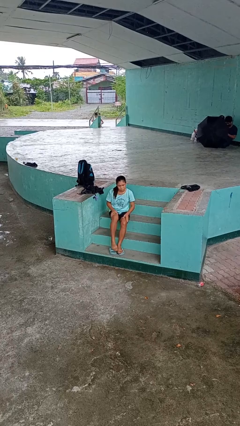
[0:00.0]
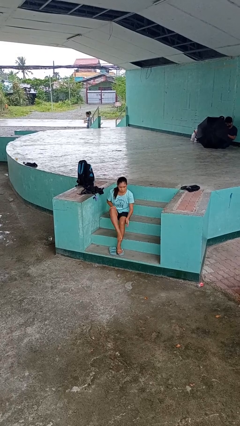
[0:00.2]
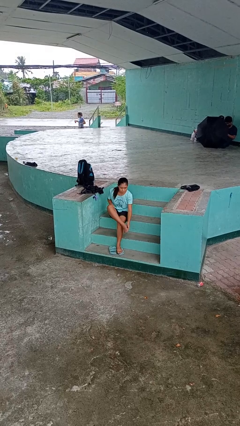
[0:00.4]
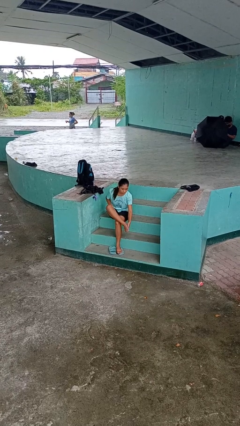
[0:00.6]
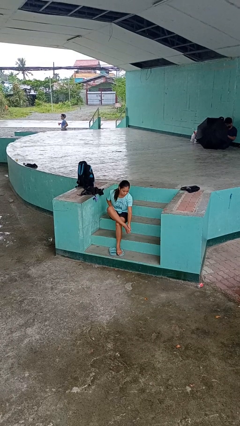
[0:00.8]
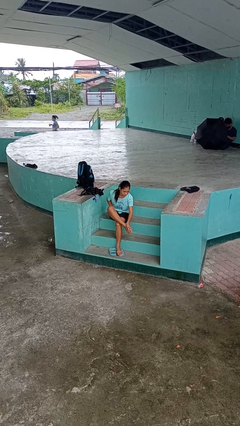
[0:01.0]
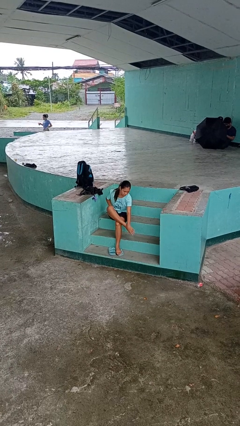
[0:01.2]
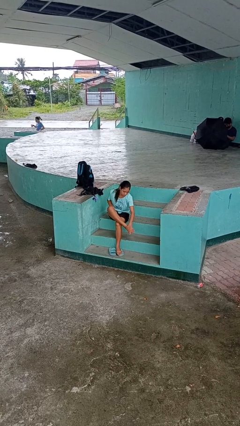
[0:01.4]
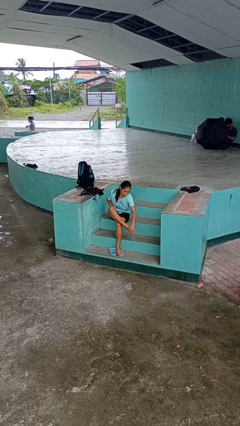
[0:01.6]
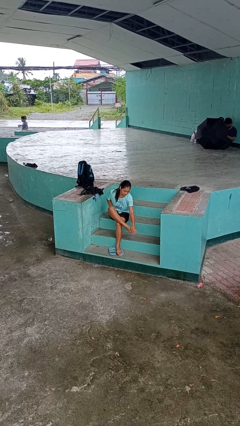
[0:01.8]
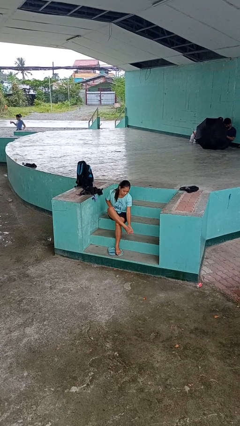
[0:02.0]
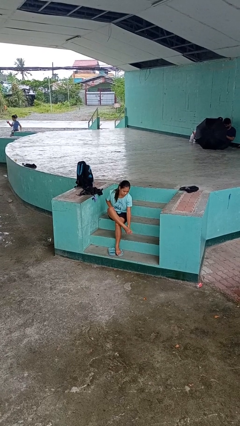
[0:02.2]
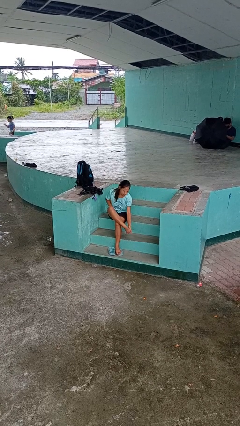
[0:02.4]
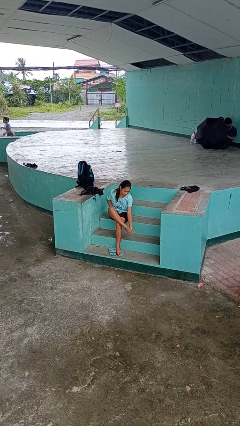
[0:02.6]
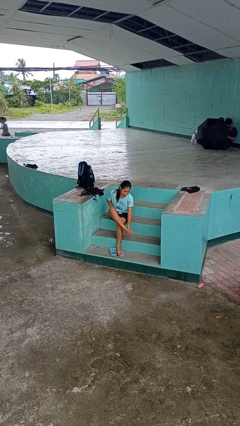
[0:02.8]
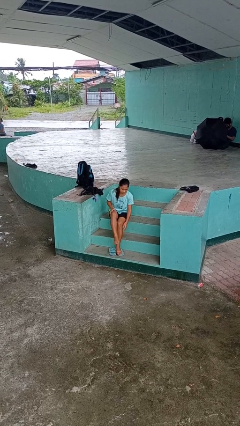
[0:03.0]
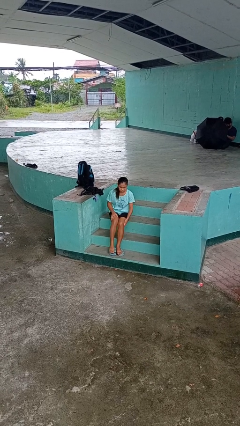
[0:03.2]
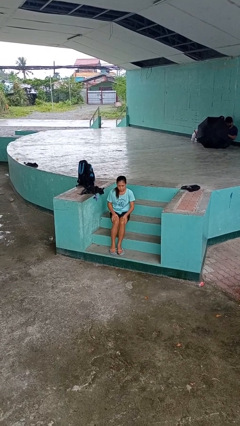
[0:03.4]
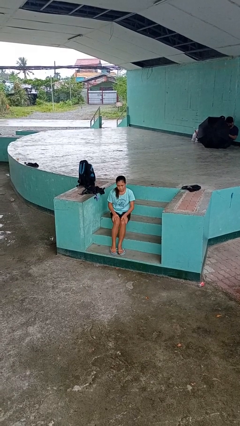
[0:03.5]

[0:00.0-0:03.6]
person rubs foot

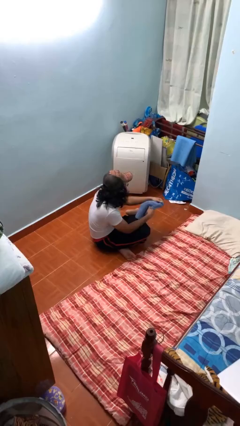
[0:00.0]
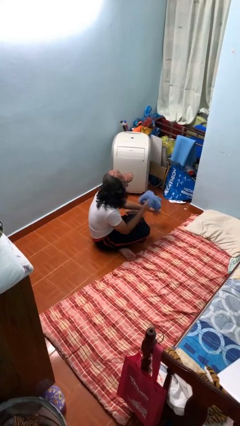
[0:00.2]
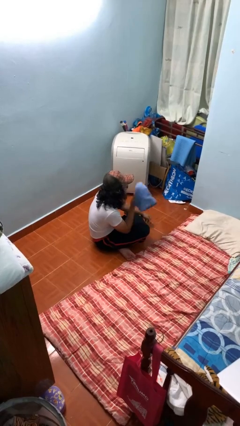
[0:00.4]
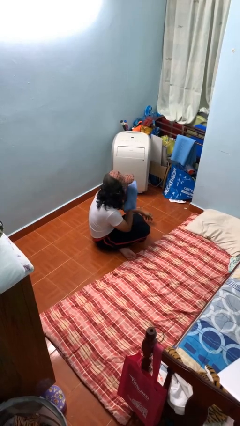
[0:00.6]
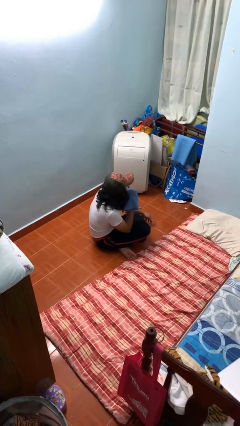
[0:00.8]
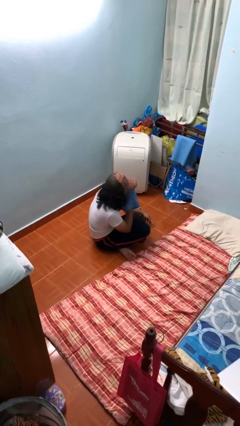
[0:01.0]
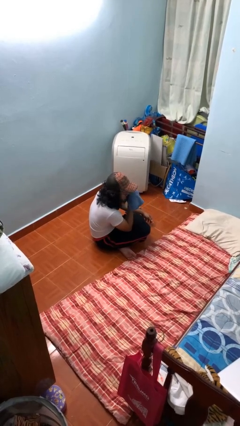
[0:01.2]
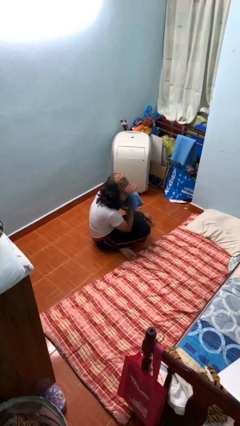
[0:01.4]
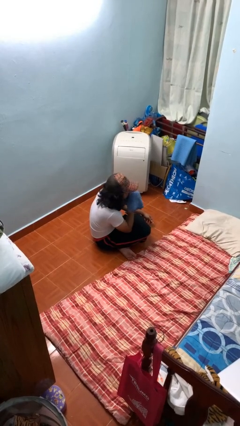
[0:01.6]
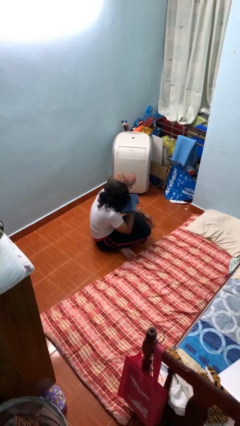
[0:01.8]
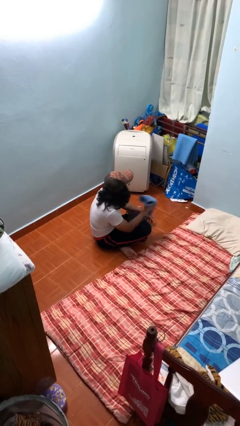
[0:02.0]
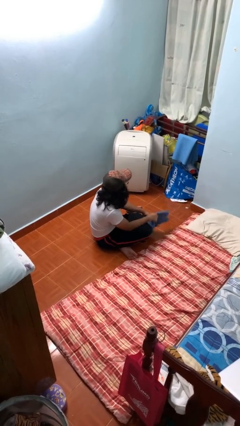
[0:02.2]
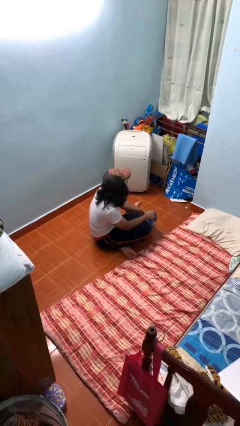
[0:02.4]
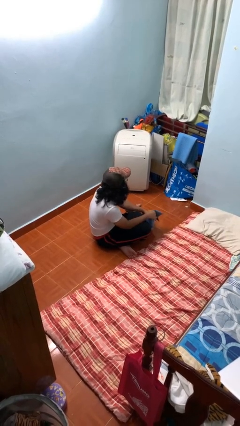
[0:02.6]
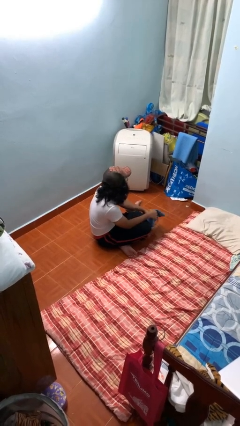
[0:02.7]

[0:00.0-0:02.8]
person wipes mouth with napkin

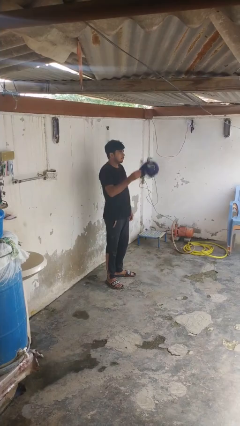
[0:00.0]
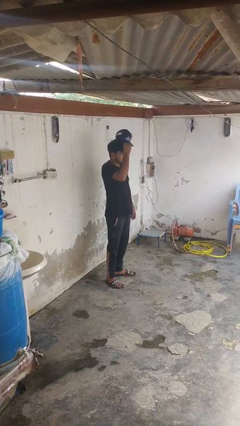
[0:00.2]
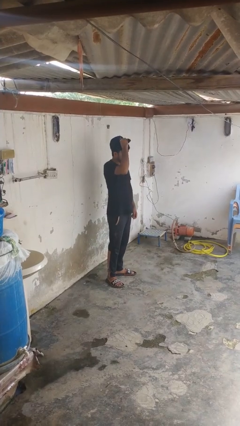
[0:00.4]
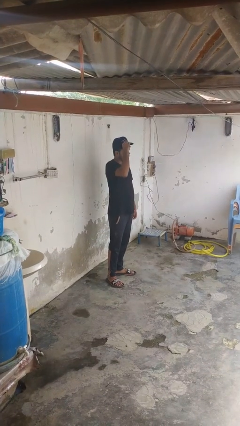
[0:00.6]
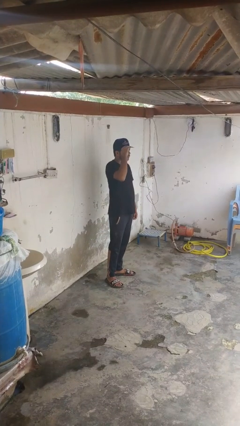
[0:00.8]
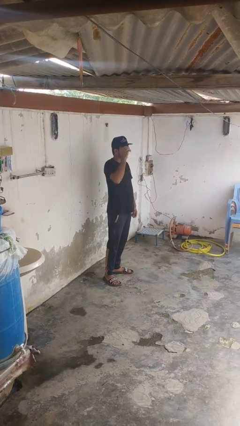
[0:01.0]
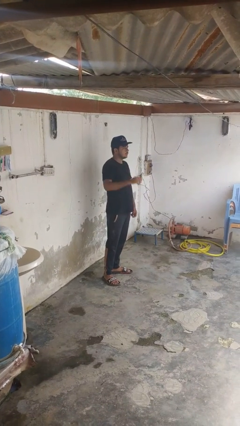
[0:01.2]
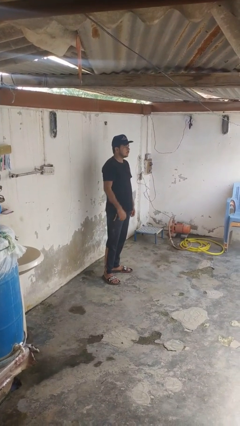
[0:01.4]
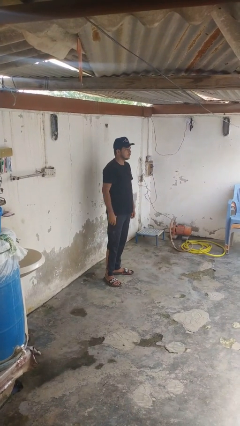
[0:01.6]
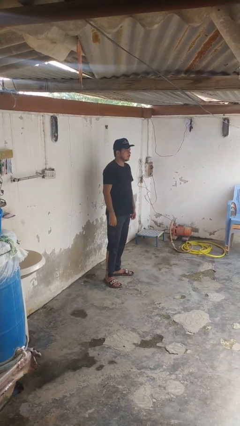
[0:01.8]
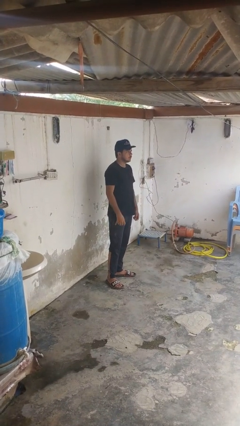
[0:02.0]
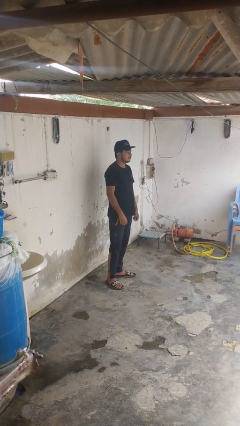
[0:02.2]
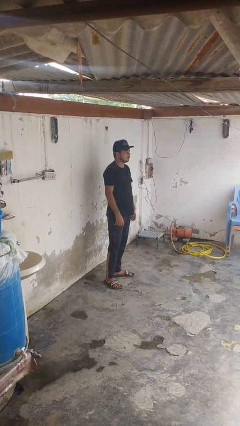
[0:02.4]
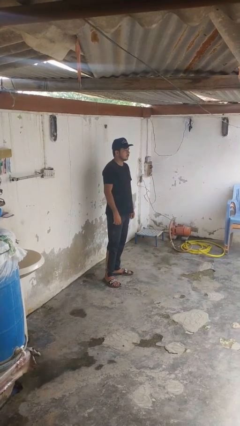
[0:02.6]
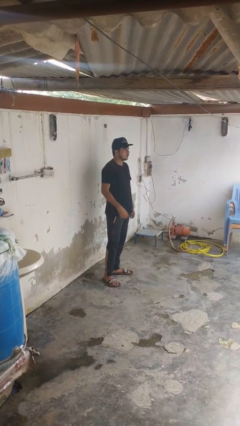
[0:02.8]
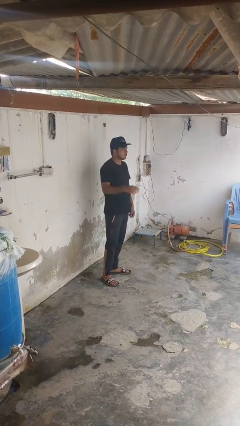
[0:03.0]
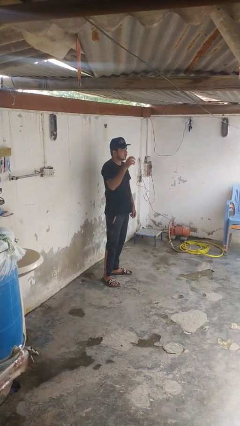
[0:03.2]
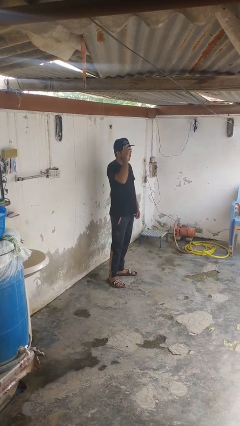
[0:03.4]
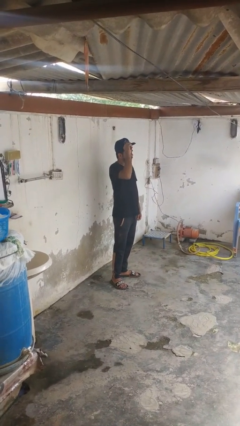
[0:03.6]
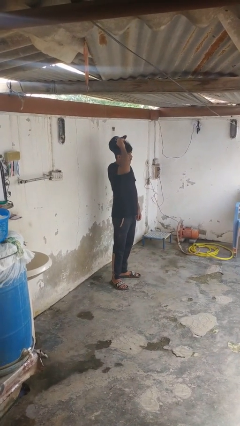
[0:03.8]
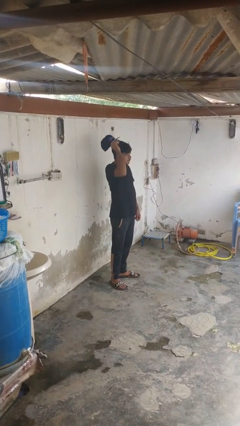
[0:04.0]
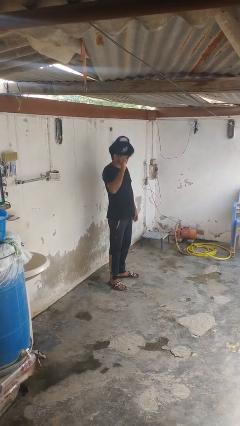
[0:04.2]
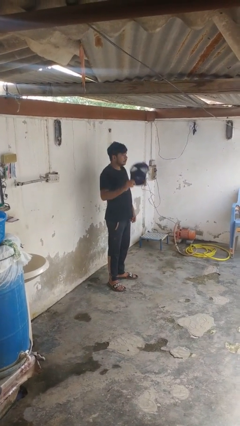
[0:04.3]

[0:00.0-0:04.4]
person puts on hat

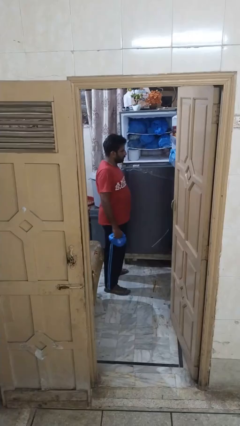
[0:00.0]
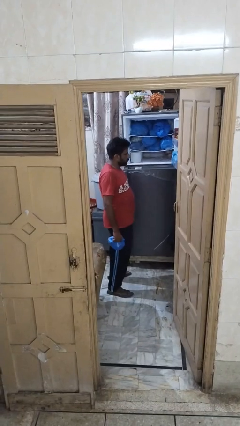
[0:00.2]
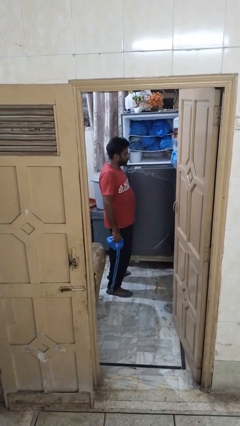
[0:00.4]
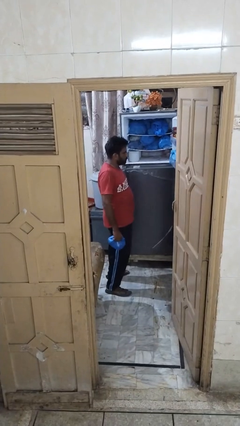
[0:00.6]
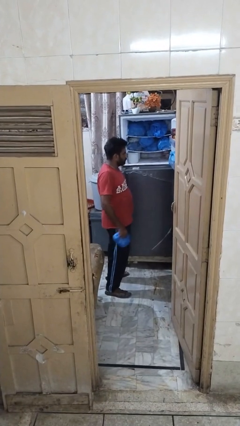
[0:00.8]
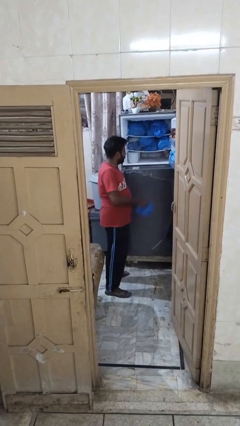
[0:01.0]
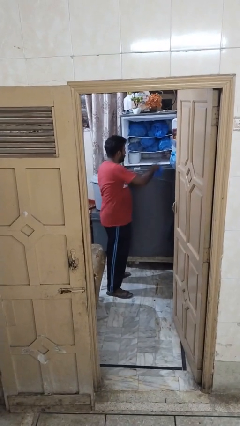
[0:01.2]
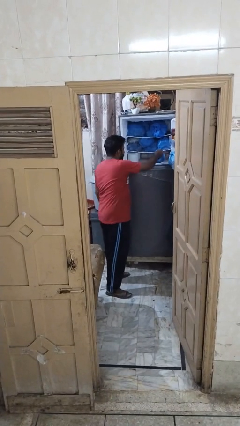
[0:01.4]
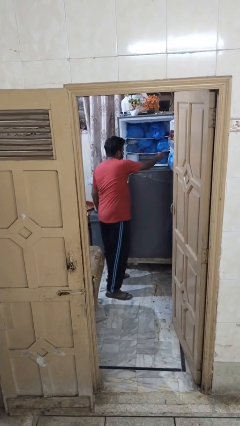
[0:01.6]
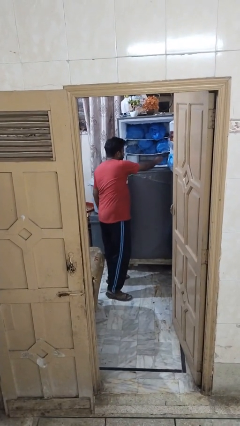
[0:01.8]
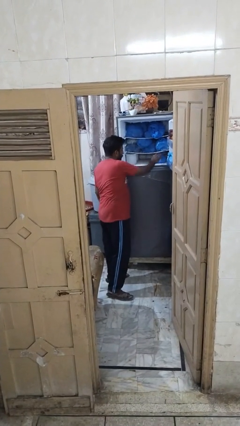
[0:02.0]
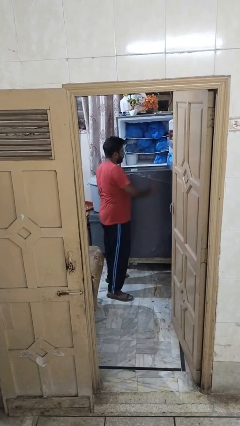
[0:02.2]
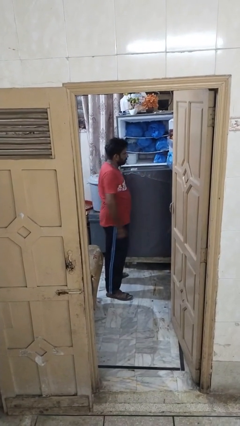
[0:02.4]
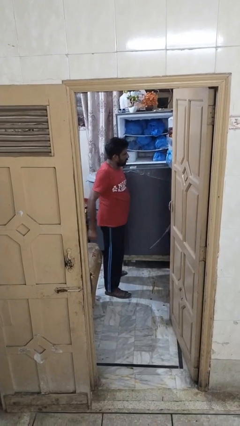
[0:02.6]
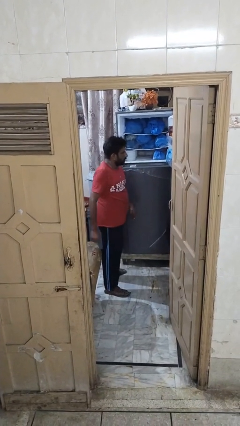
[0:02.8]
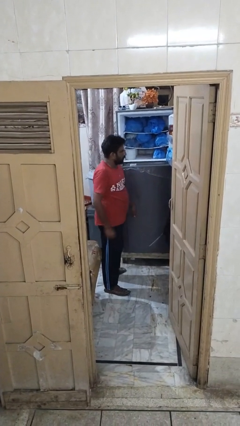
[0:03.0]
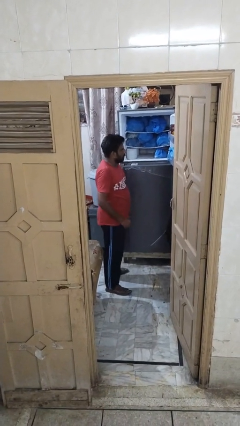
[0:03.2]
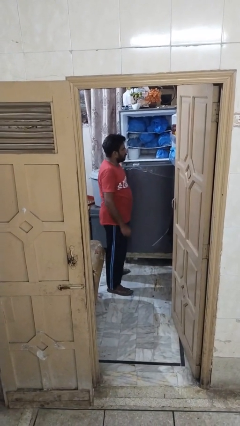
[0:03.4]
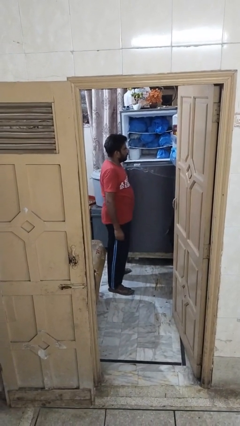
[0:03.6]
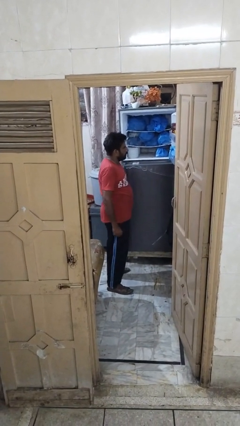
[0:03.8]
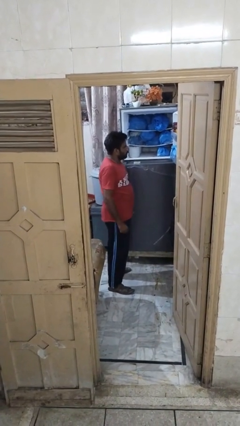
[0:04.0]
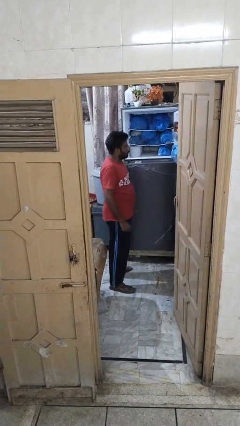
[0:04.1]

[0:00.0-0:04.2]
person loads groceries into refrigerator

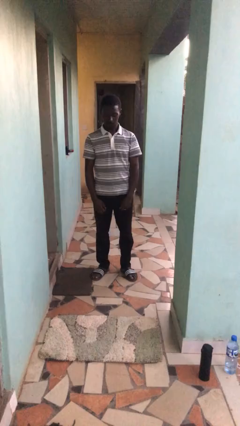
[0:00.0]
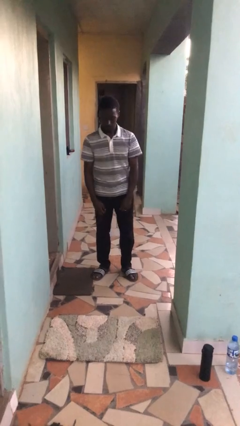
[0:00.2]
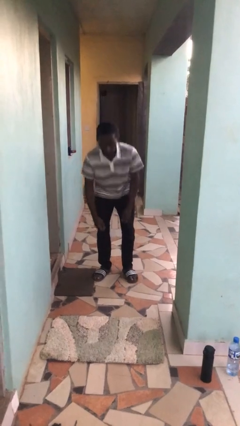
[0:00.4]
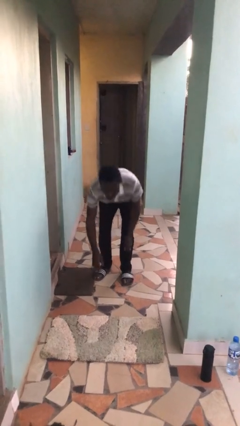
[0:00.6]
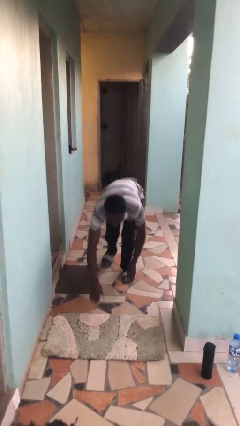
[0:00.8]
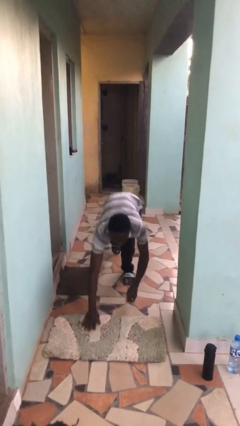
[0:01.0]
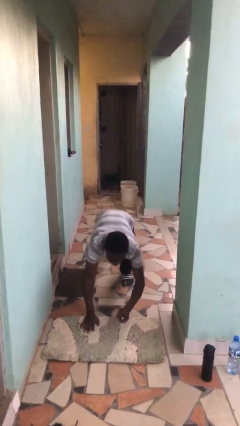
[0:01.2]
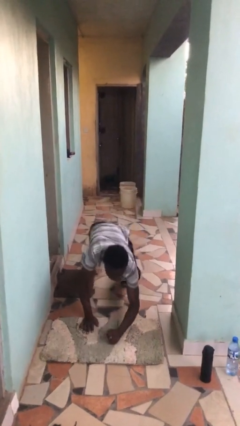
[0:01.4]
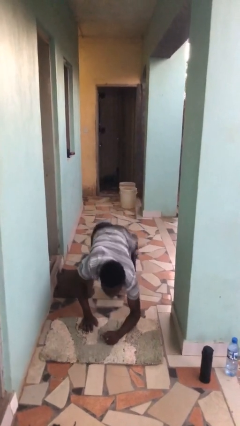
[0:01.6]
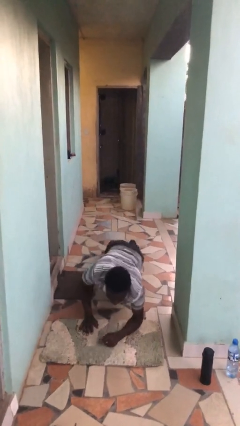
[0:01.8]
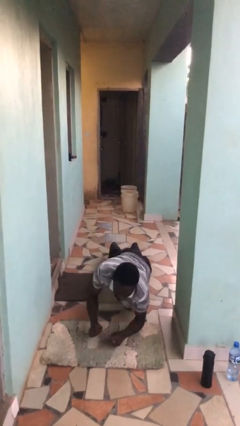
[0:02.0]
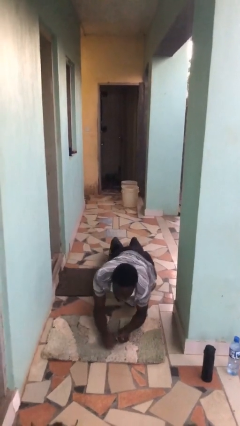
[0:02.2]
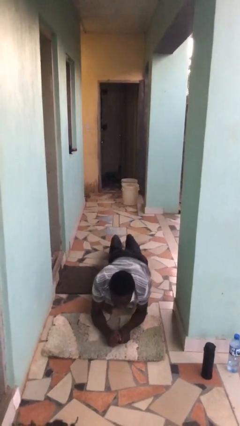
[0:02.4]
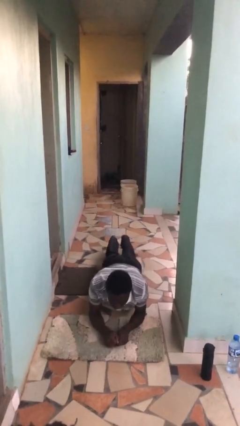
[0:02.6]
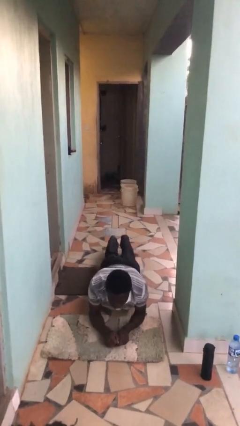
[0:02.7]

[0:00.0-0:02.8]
person exercises with plank
